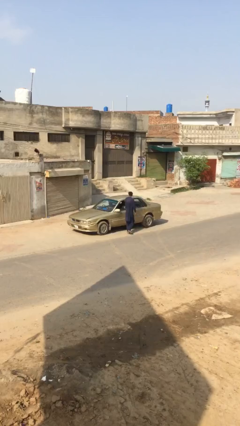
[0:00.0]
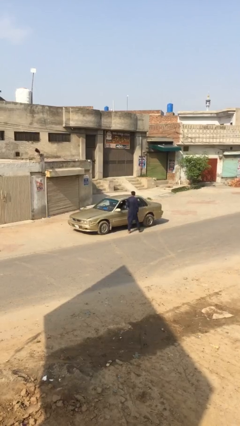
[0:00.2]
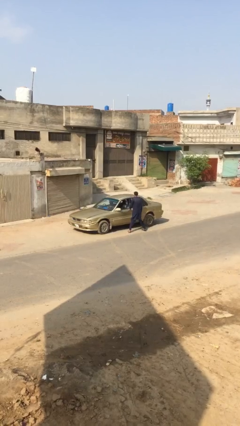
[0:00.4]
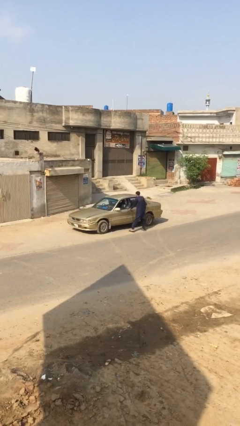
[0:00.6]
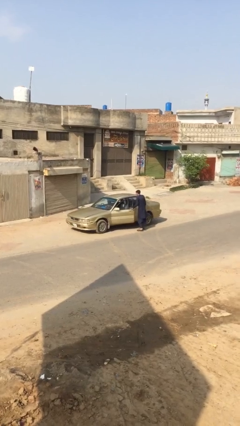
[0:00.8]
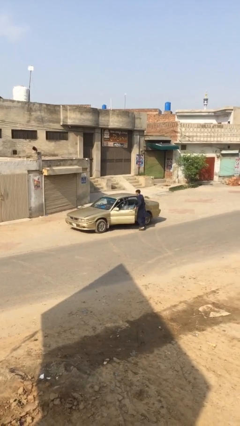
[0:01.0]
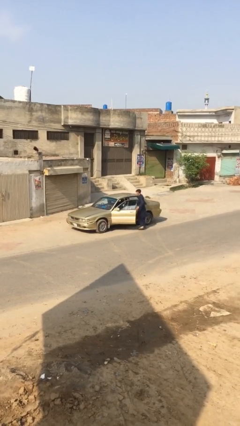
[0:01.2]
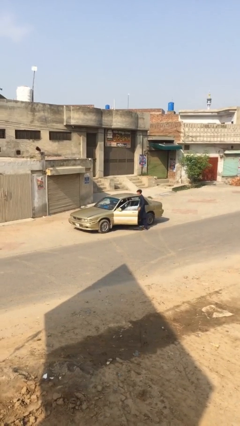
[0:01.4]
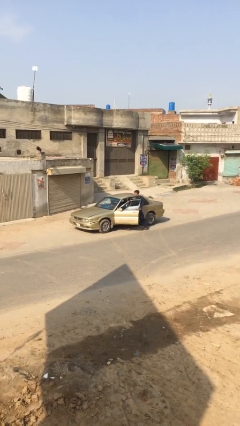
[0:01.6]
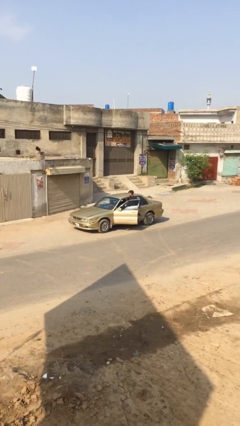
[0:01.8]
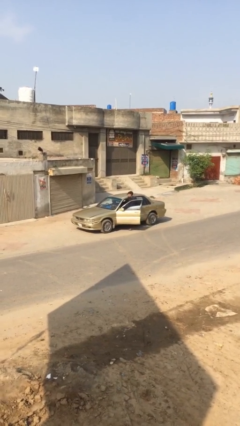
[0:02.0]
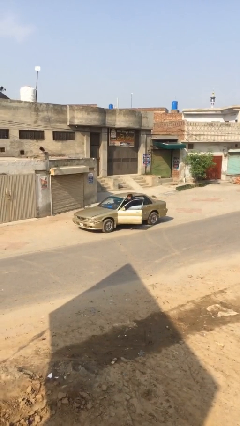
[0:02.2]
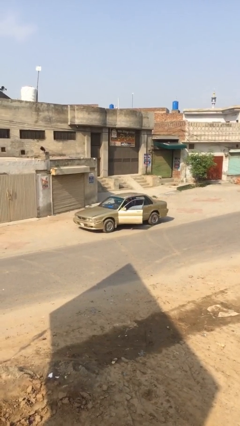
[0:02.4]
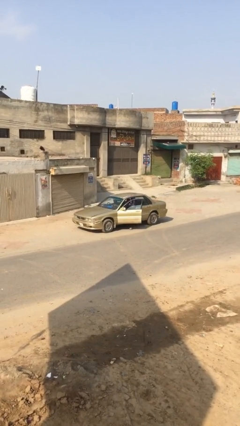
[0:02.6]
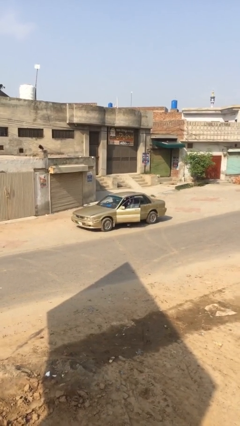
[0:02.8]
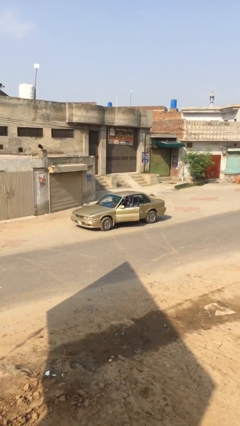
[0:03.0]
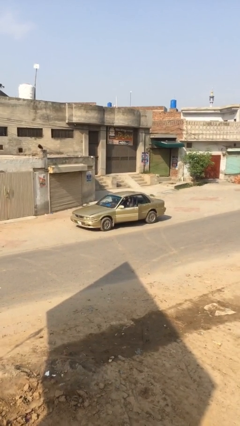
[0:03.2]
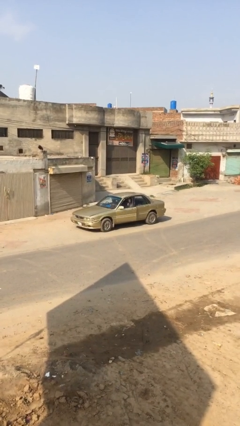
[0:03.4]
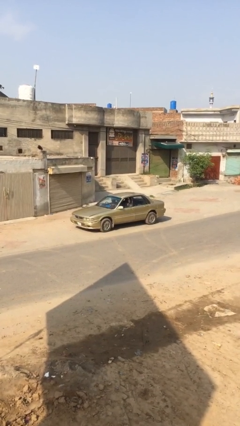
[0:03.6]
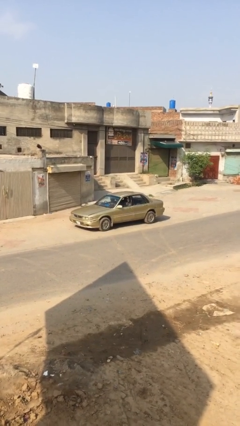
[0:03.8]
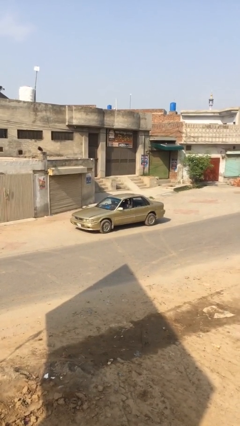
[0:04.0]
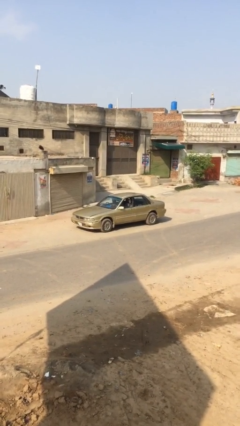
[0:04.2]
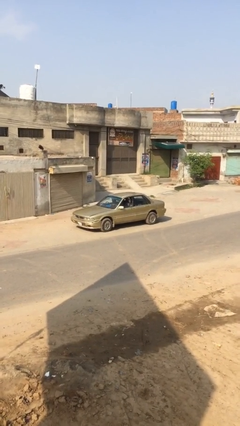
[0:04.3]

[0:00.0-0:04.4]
car picks up person

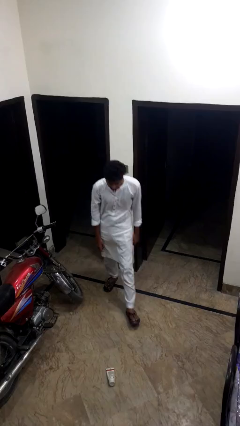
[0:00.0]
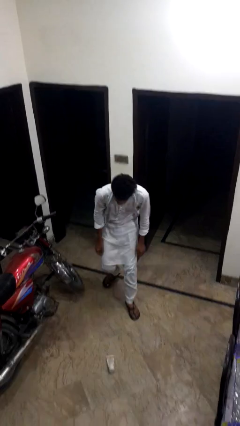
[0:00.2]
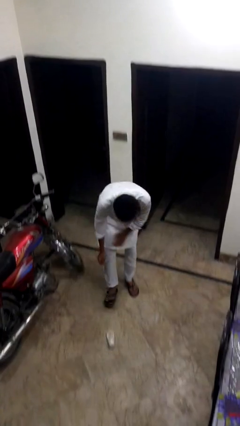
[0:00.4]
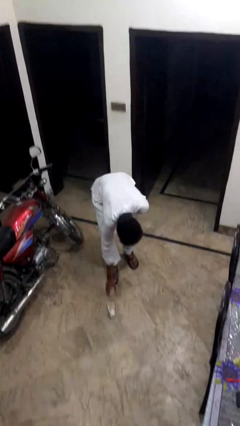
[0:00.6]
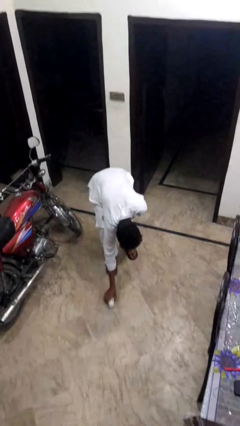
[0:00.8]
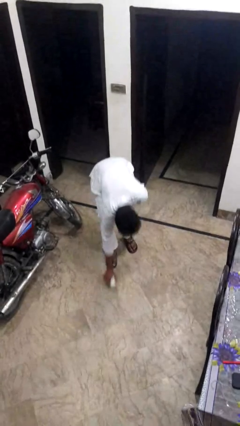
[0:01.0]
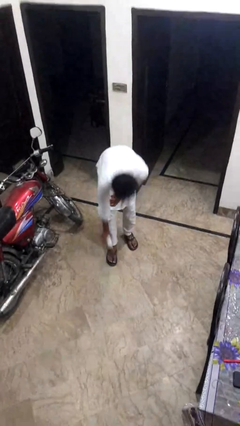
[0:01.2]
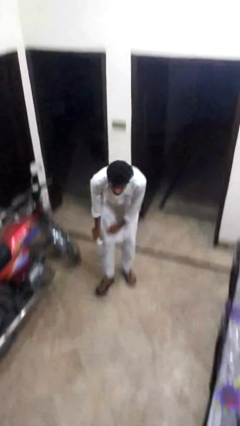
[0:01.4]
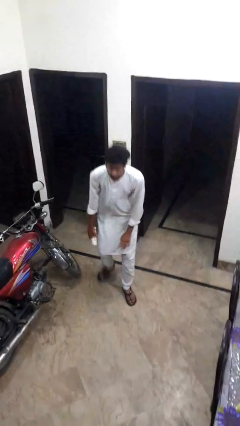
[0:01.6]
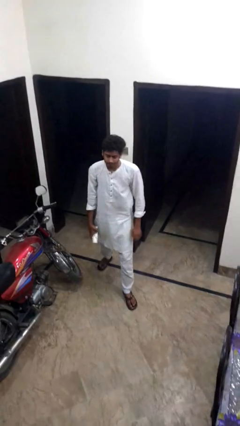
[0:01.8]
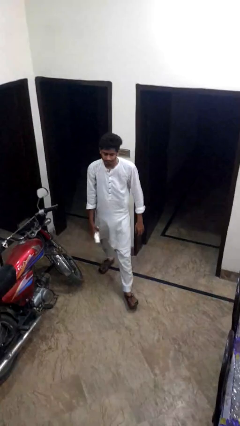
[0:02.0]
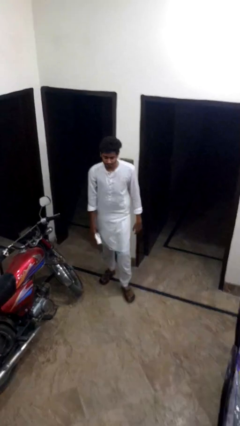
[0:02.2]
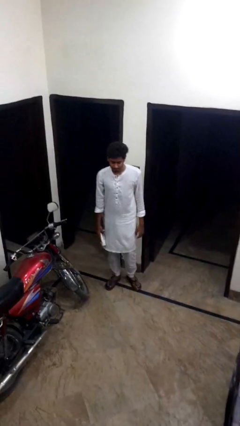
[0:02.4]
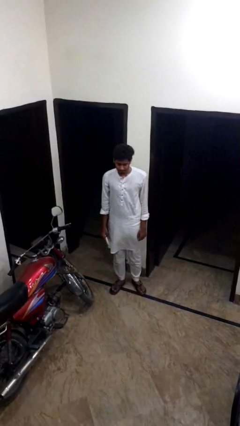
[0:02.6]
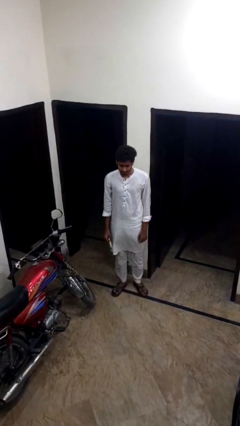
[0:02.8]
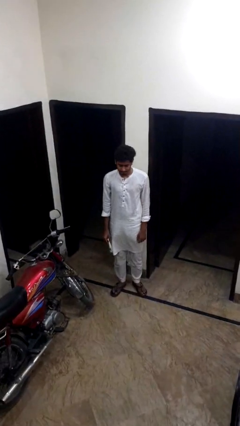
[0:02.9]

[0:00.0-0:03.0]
person picks up object from floor

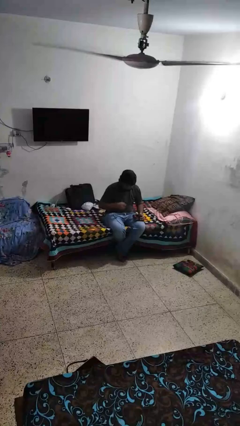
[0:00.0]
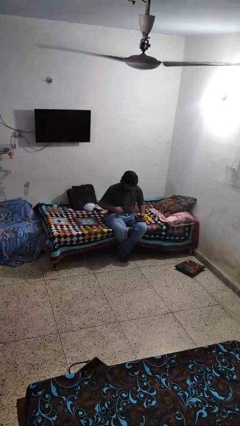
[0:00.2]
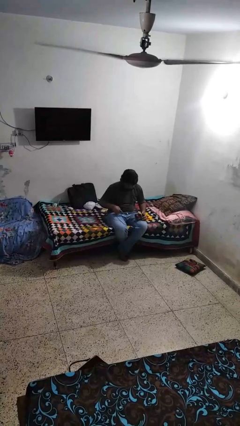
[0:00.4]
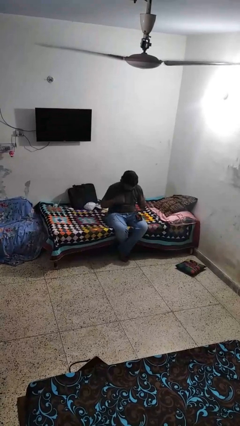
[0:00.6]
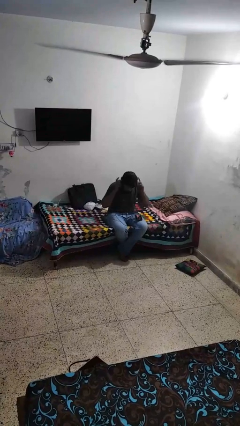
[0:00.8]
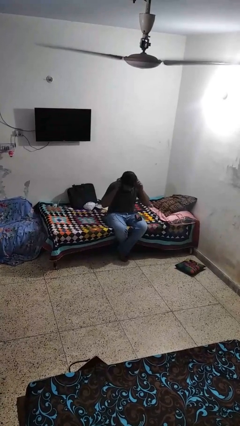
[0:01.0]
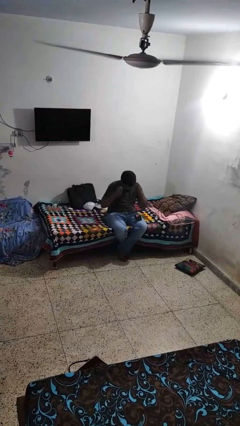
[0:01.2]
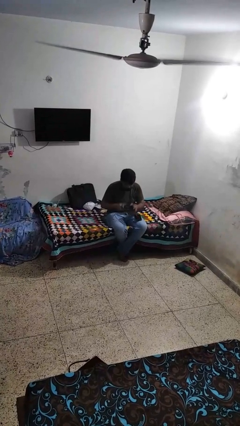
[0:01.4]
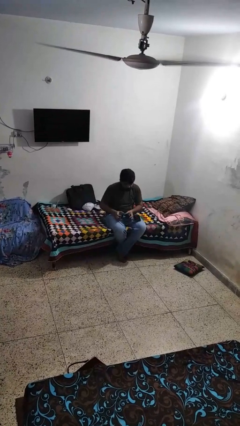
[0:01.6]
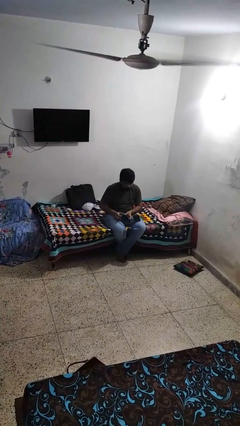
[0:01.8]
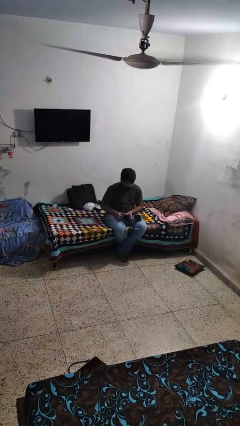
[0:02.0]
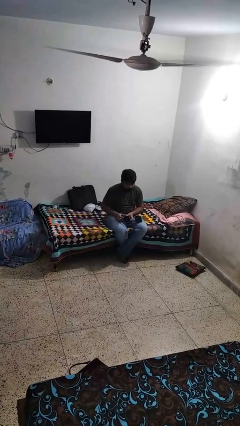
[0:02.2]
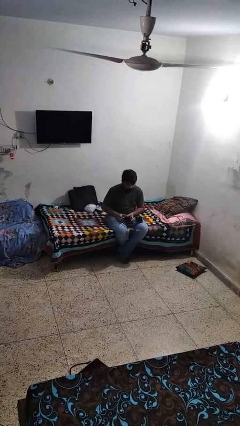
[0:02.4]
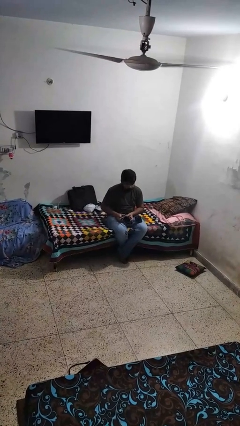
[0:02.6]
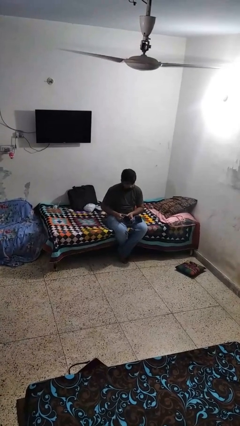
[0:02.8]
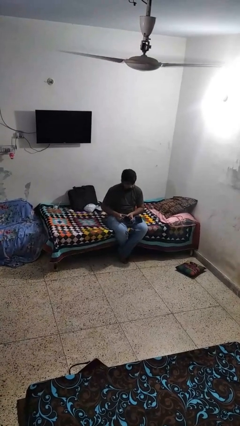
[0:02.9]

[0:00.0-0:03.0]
person takes off headphones

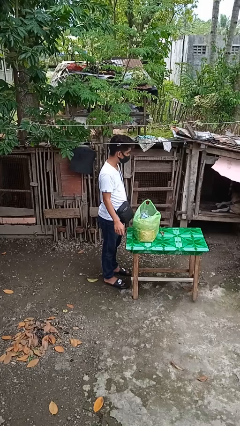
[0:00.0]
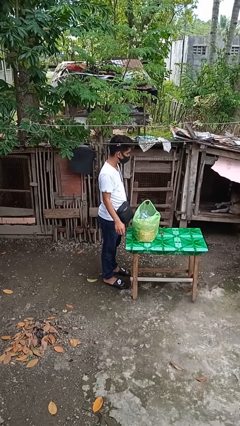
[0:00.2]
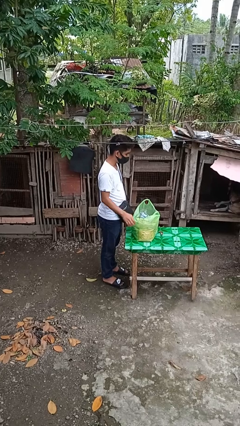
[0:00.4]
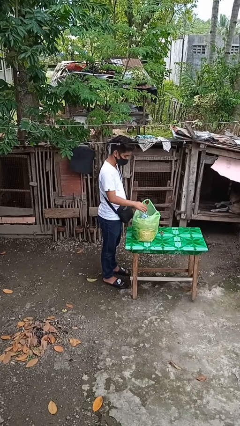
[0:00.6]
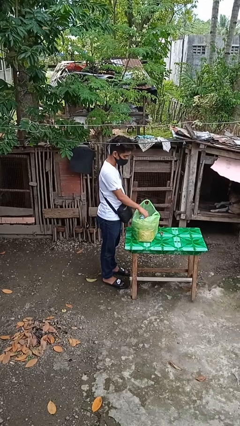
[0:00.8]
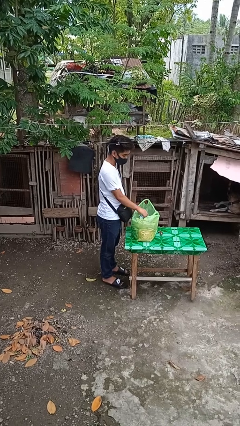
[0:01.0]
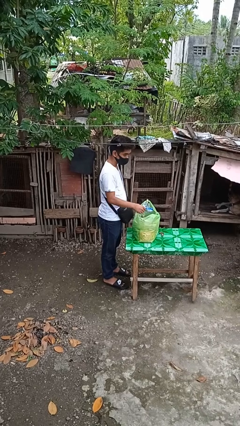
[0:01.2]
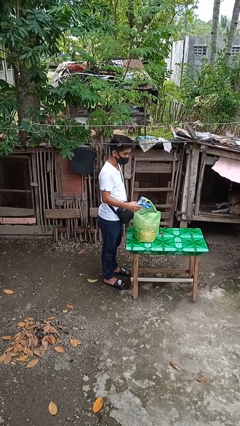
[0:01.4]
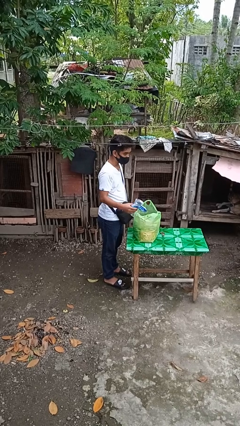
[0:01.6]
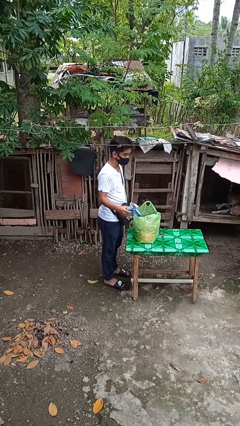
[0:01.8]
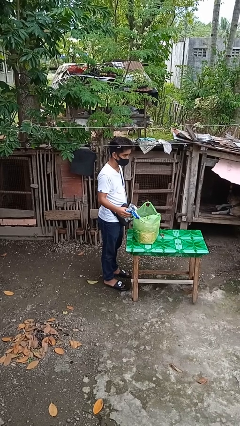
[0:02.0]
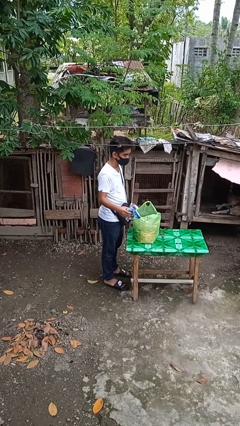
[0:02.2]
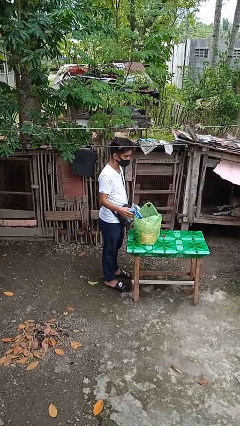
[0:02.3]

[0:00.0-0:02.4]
person takes object from bag

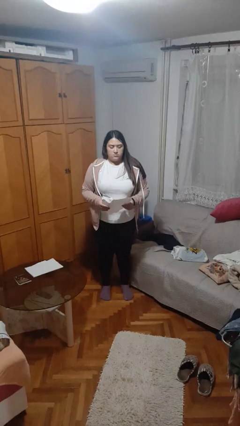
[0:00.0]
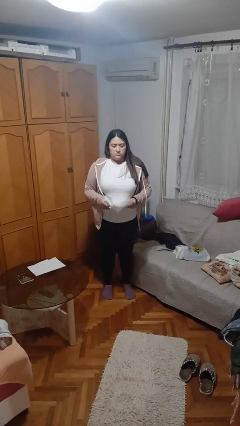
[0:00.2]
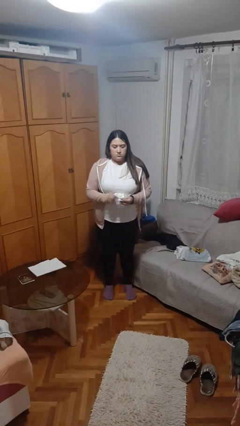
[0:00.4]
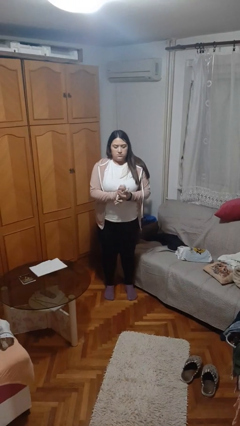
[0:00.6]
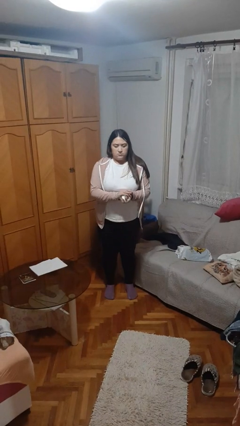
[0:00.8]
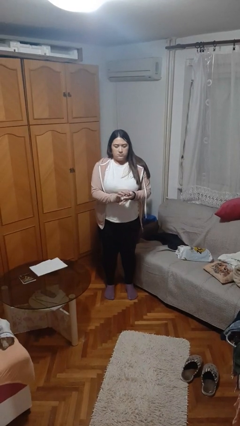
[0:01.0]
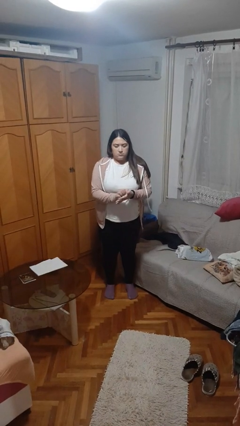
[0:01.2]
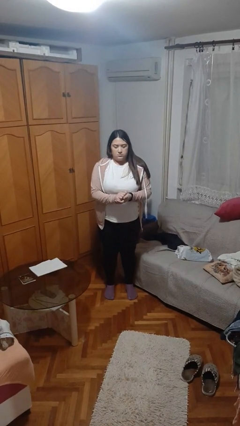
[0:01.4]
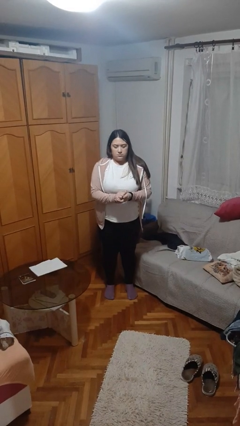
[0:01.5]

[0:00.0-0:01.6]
person crumples paper

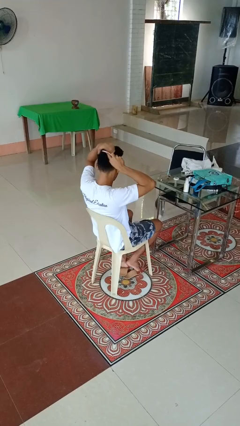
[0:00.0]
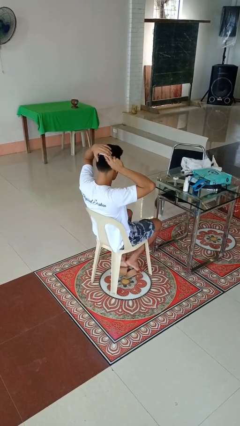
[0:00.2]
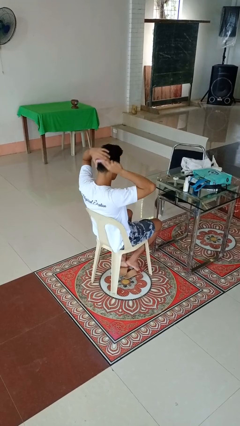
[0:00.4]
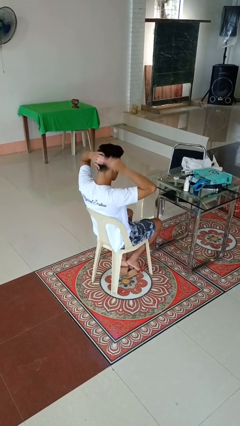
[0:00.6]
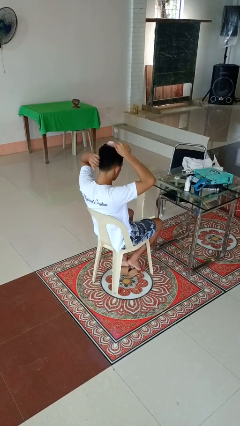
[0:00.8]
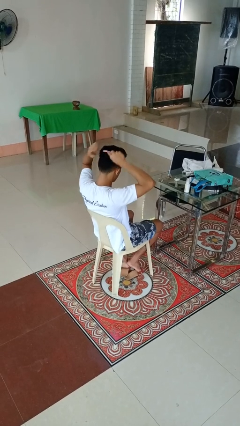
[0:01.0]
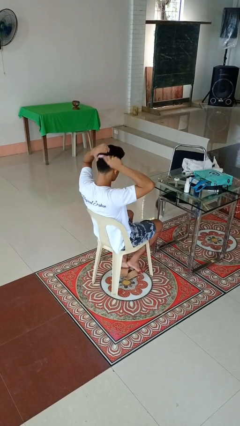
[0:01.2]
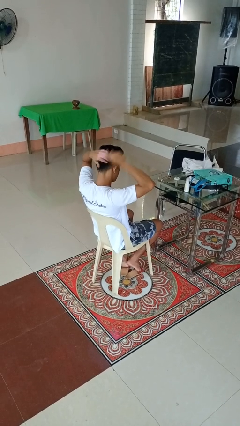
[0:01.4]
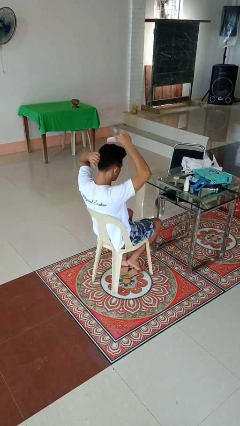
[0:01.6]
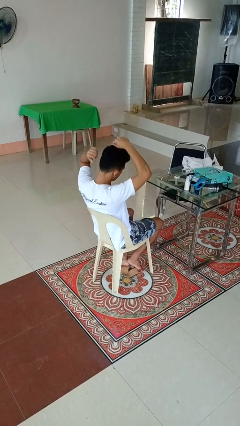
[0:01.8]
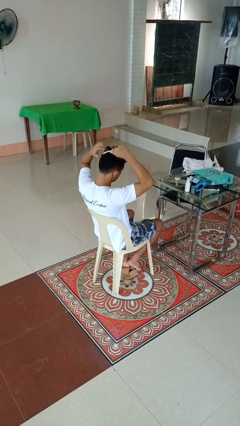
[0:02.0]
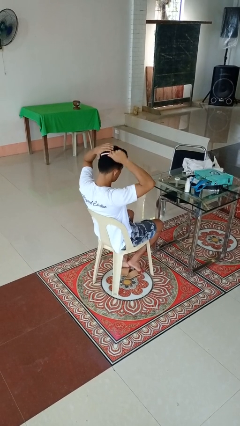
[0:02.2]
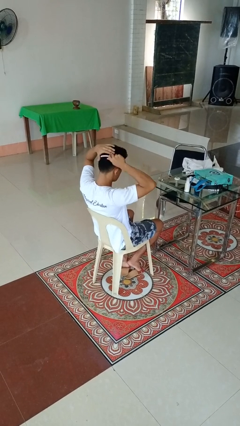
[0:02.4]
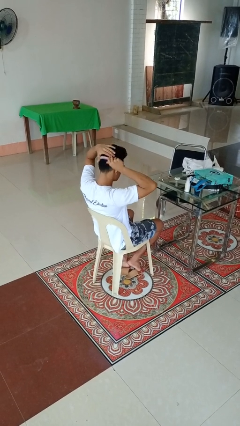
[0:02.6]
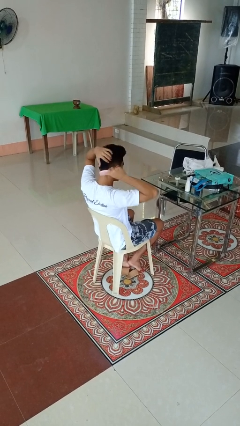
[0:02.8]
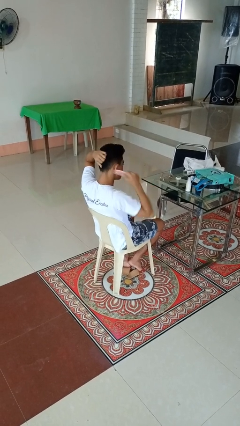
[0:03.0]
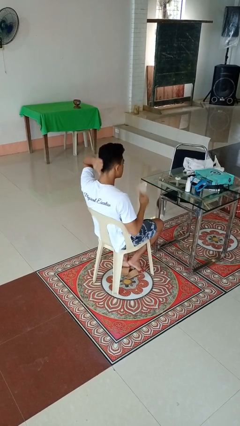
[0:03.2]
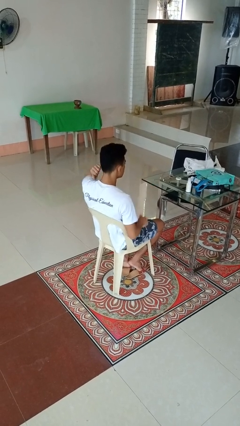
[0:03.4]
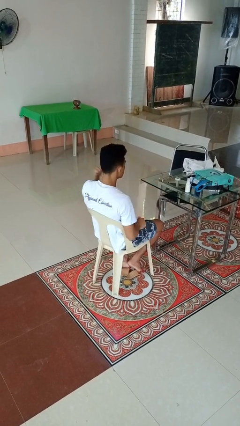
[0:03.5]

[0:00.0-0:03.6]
person brushes hair
